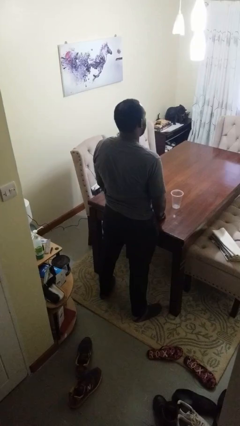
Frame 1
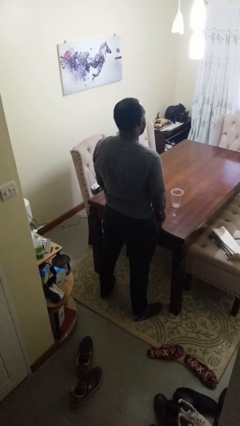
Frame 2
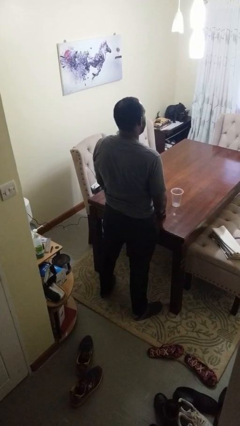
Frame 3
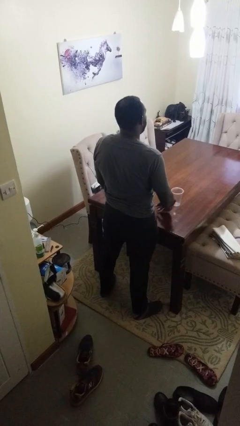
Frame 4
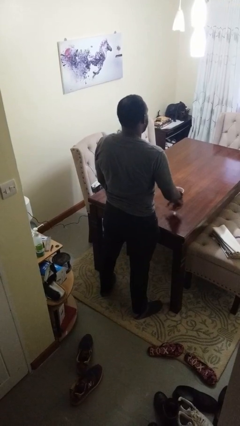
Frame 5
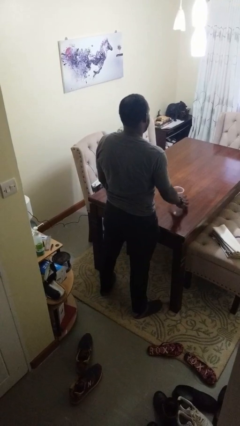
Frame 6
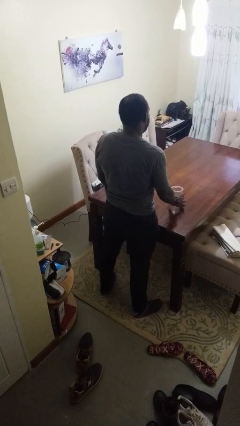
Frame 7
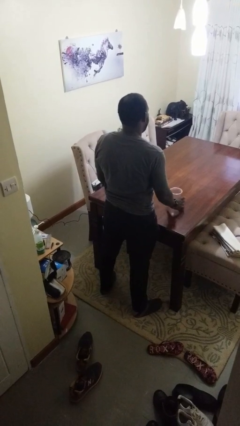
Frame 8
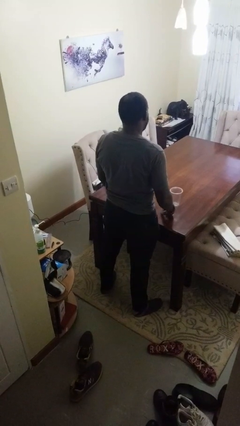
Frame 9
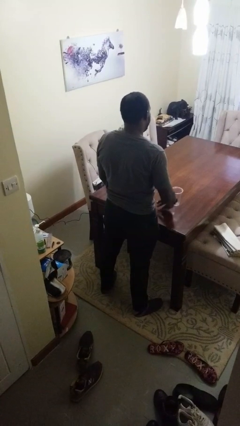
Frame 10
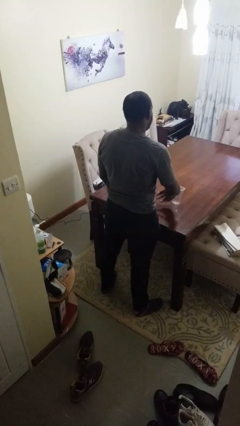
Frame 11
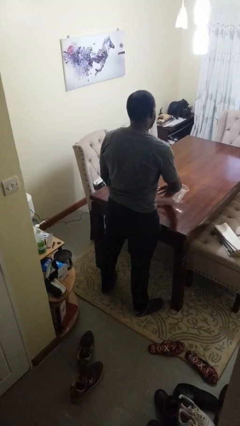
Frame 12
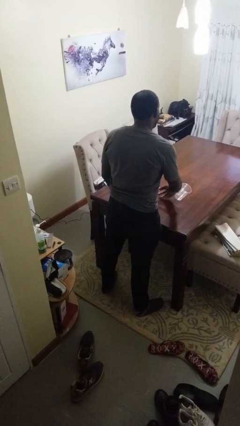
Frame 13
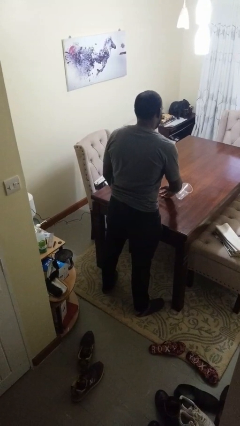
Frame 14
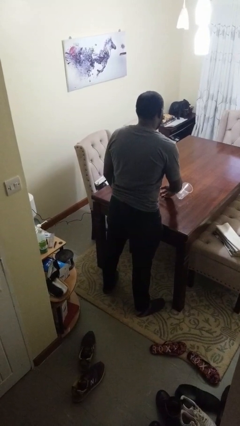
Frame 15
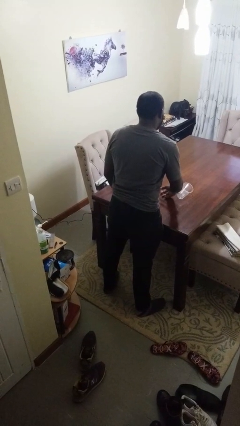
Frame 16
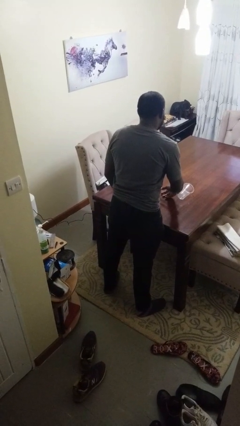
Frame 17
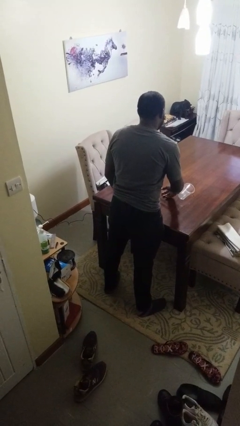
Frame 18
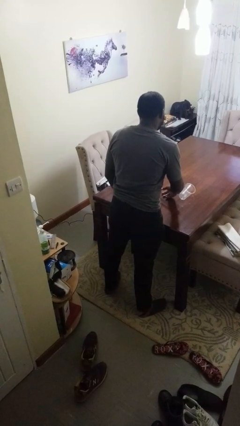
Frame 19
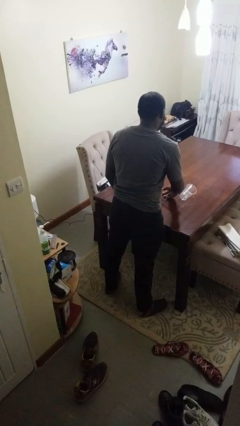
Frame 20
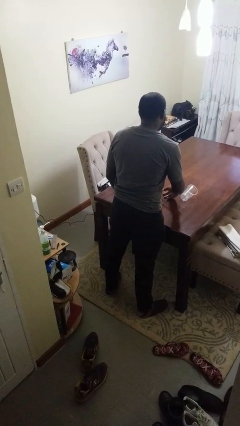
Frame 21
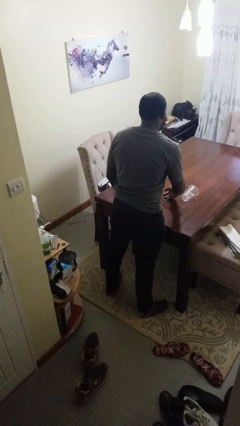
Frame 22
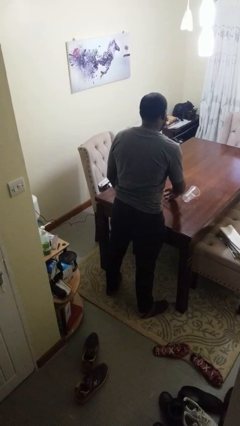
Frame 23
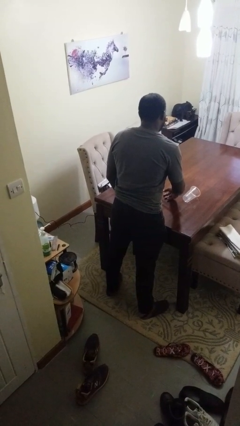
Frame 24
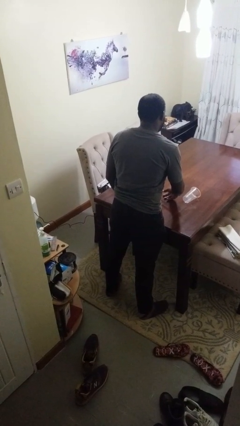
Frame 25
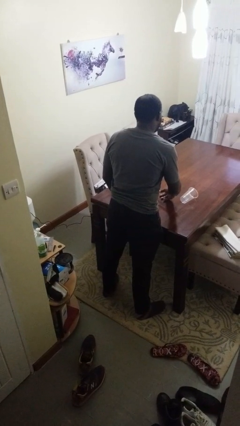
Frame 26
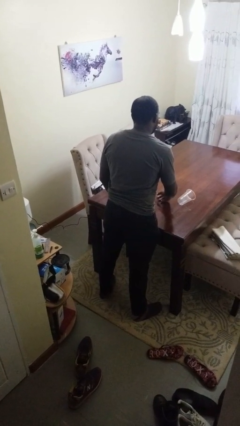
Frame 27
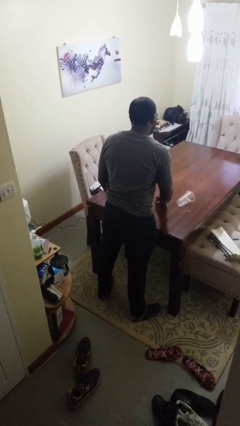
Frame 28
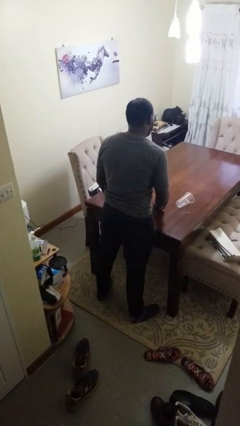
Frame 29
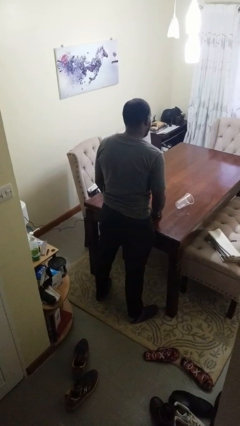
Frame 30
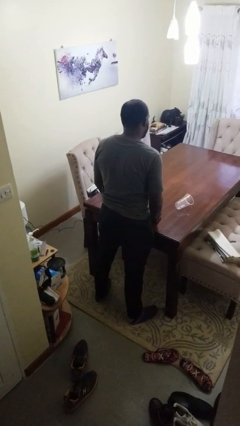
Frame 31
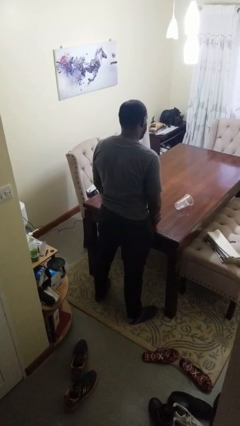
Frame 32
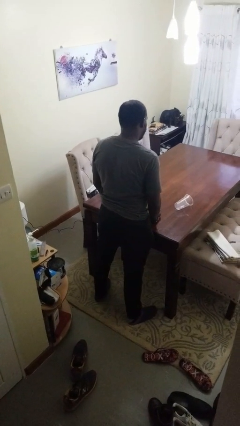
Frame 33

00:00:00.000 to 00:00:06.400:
person knocks over glass

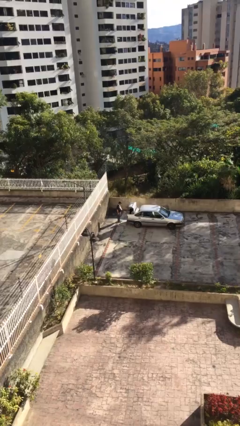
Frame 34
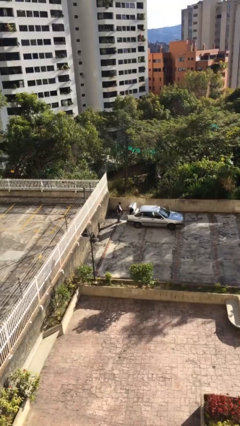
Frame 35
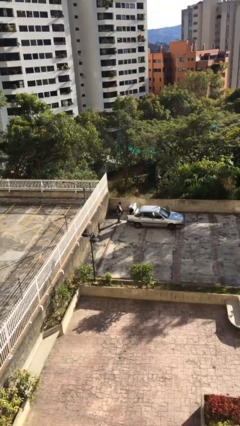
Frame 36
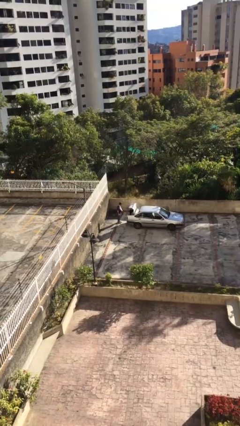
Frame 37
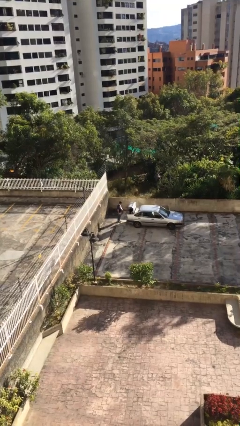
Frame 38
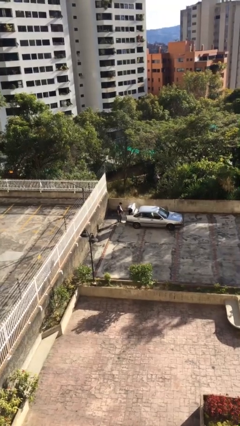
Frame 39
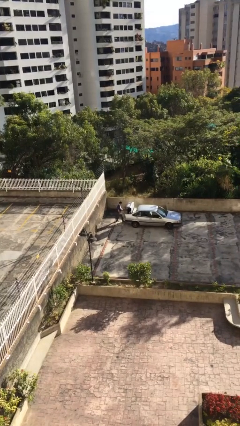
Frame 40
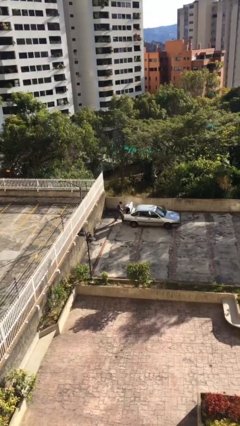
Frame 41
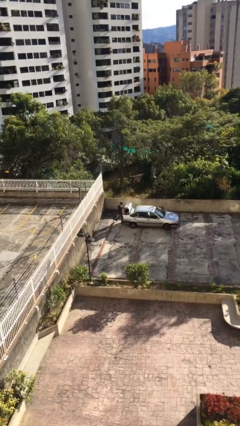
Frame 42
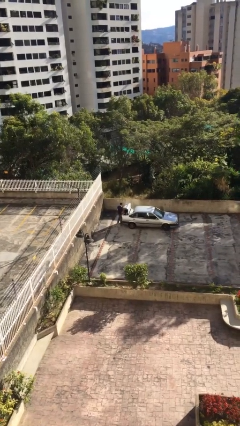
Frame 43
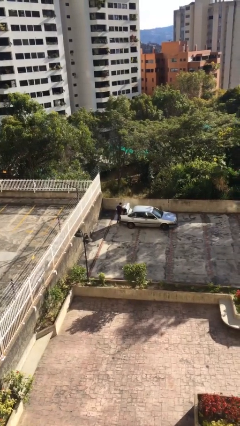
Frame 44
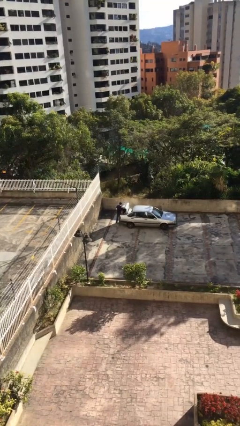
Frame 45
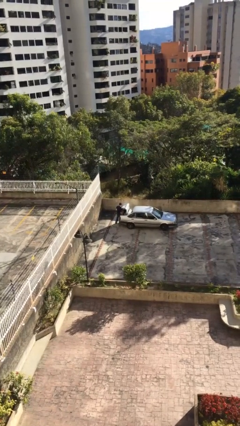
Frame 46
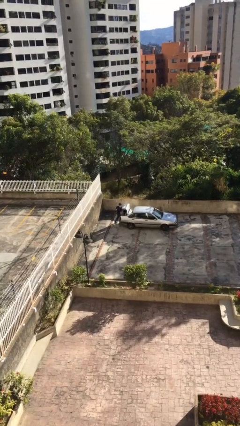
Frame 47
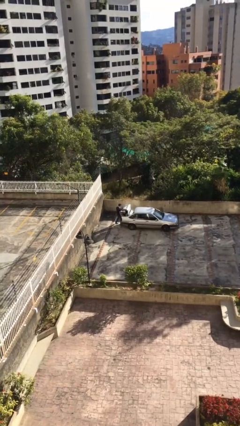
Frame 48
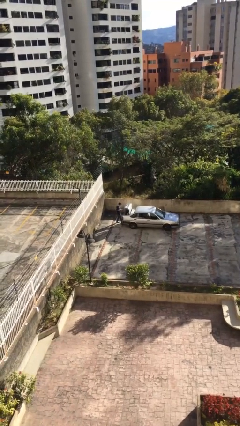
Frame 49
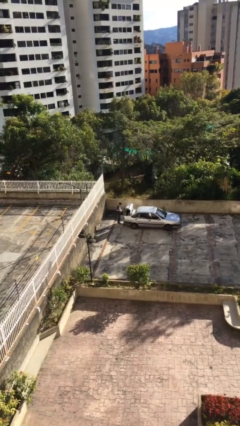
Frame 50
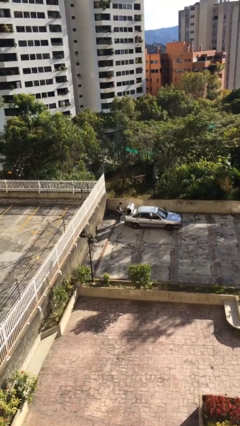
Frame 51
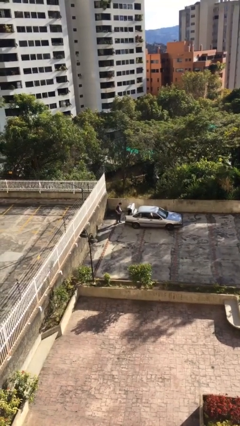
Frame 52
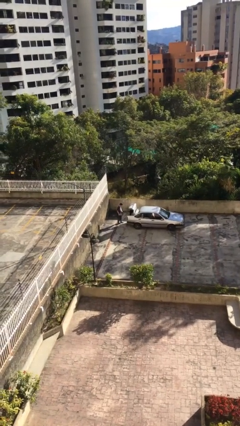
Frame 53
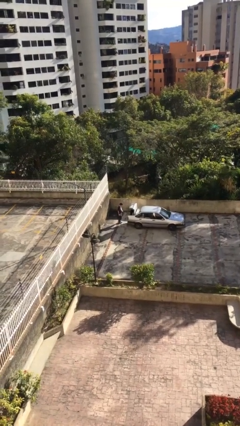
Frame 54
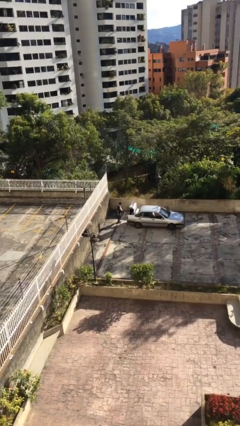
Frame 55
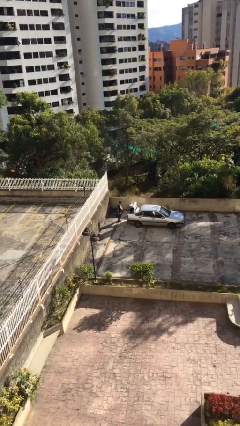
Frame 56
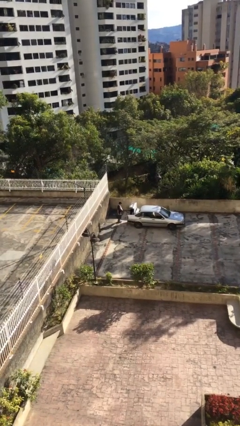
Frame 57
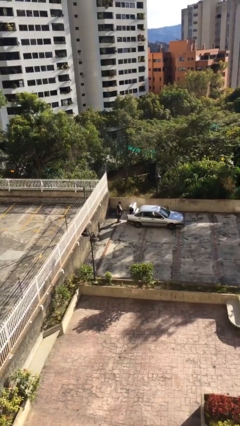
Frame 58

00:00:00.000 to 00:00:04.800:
person unloads car

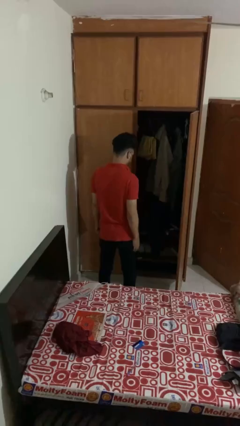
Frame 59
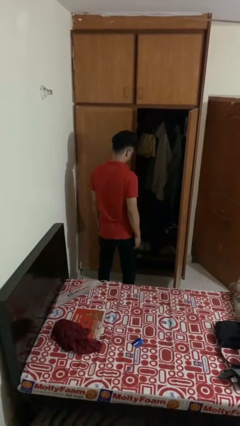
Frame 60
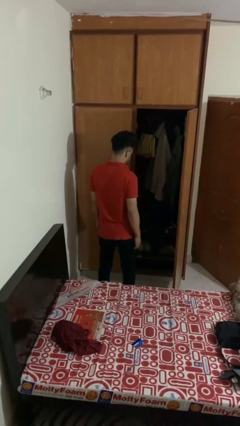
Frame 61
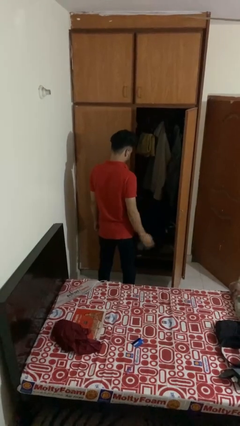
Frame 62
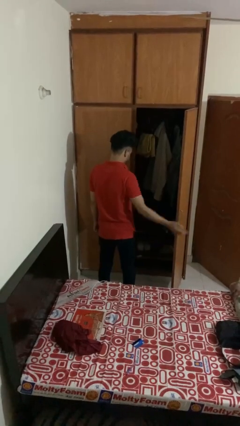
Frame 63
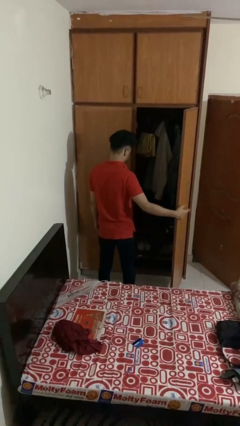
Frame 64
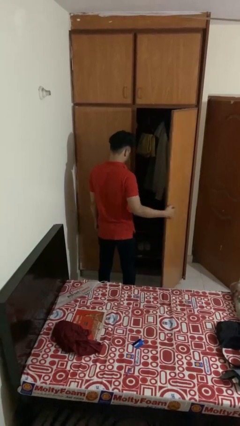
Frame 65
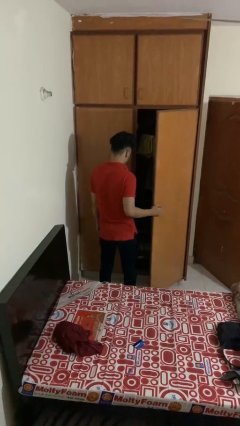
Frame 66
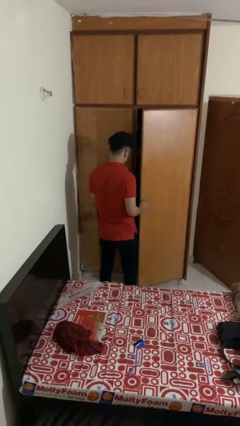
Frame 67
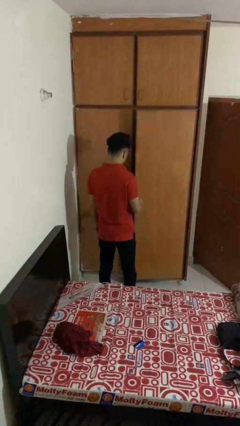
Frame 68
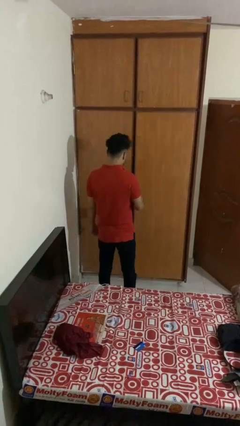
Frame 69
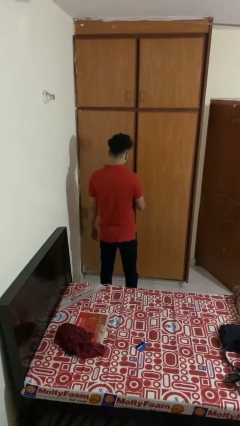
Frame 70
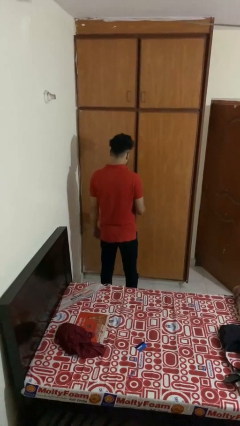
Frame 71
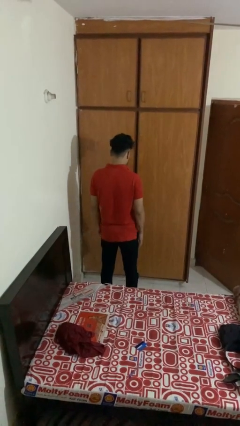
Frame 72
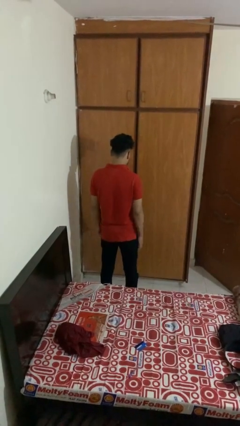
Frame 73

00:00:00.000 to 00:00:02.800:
person closes closet door

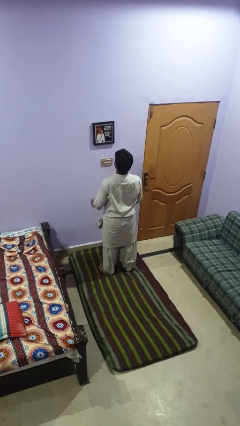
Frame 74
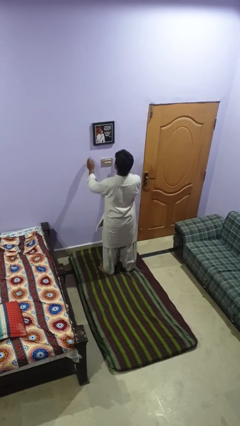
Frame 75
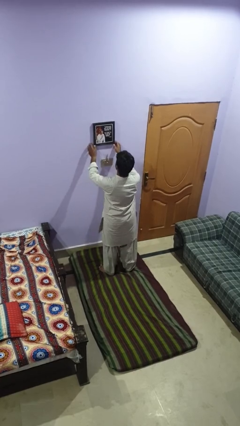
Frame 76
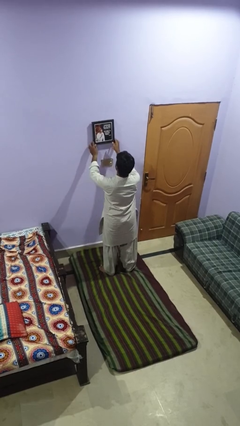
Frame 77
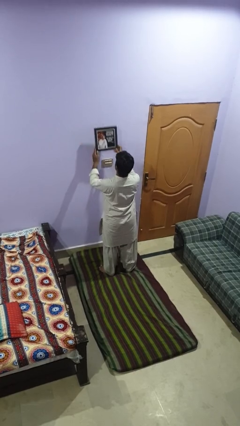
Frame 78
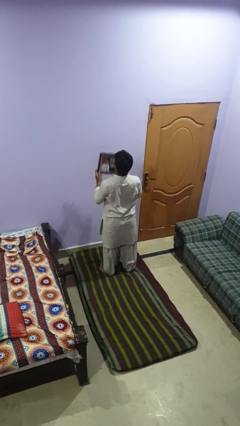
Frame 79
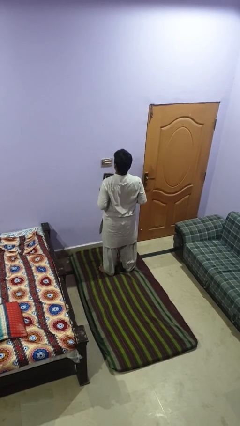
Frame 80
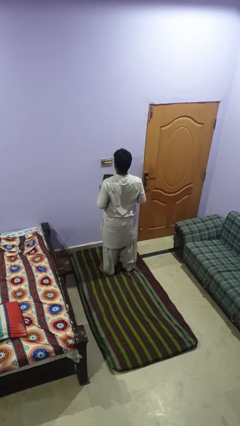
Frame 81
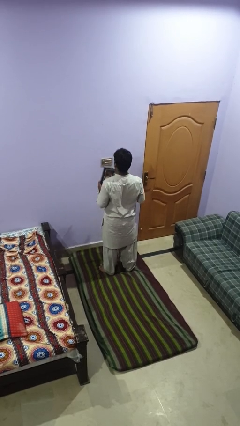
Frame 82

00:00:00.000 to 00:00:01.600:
person takes down picture frame

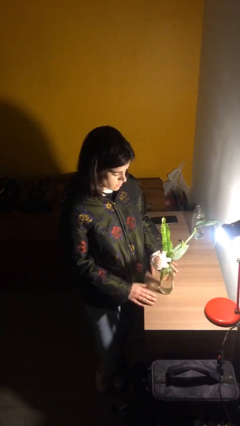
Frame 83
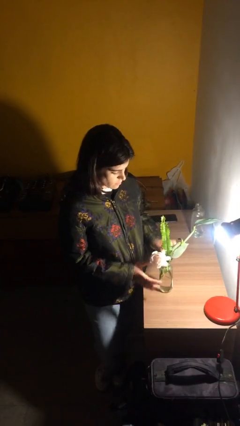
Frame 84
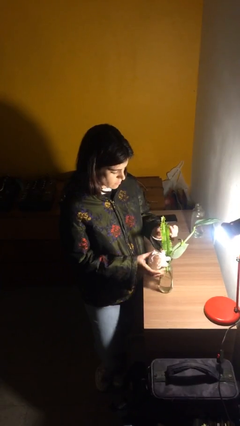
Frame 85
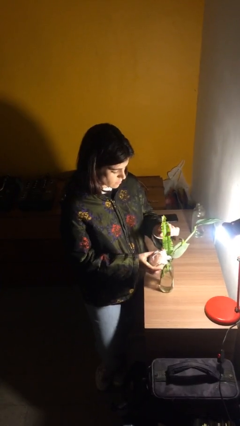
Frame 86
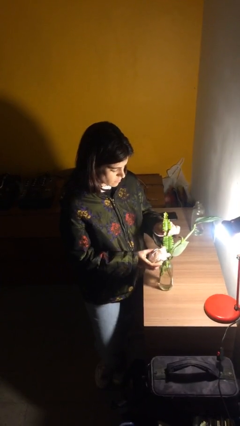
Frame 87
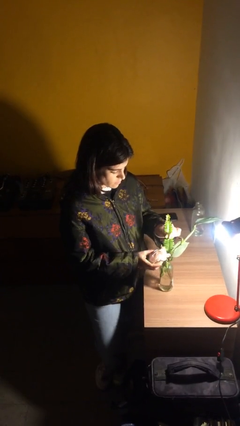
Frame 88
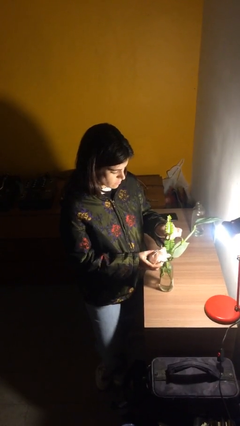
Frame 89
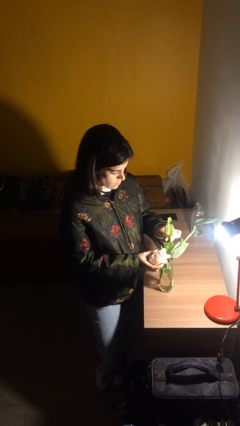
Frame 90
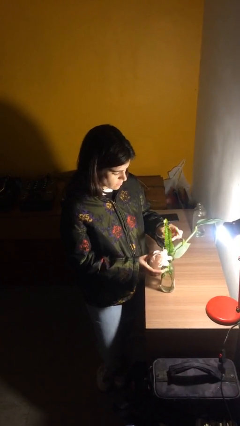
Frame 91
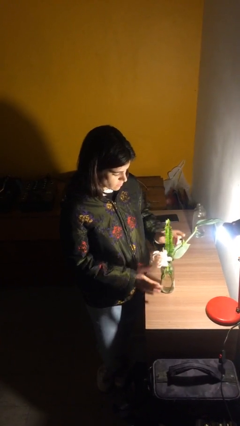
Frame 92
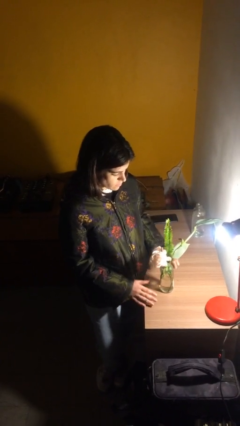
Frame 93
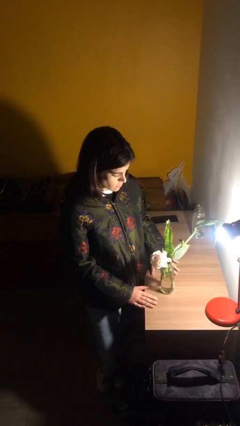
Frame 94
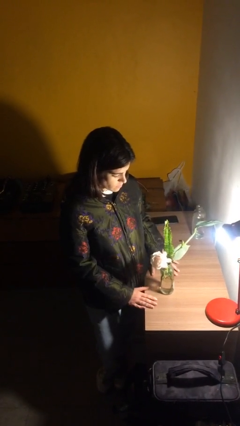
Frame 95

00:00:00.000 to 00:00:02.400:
person arranges flowers in vase
